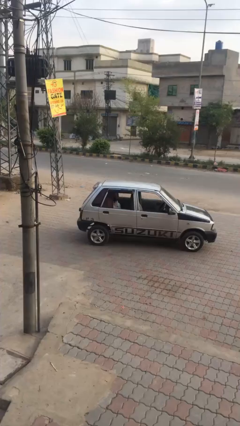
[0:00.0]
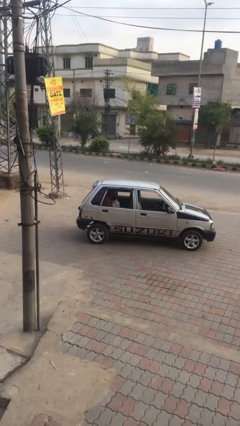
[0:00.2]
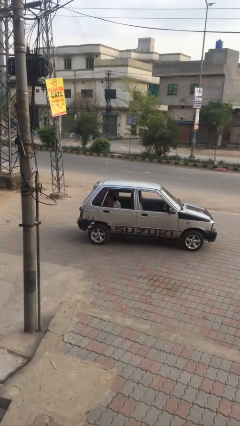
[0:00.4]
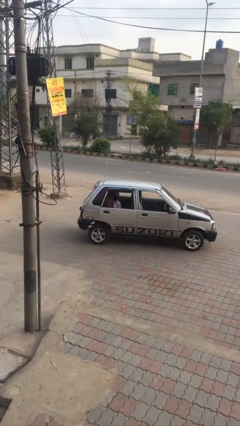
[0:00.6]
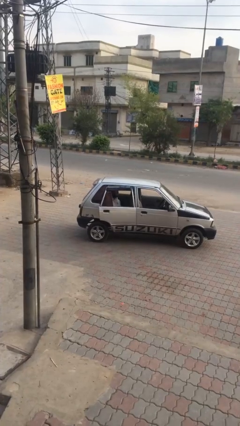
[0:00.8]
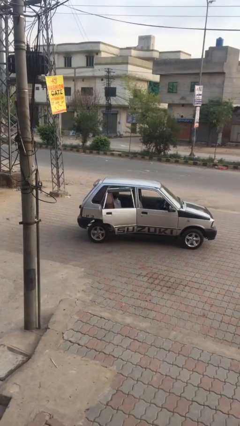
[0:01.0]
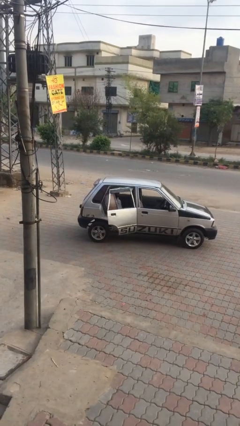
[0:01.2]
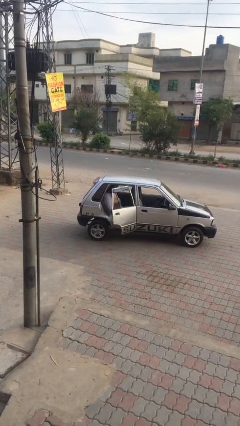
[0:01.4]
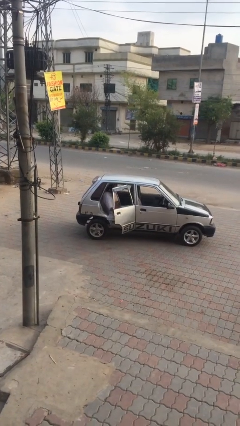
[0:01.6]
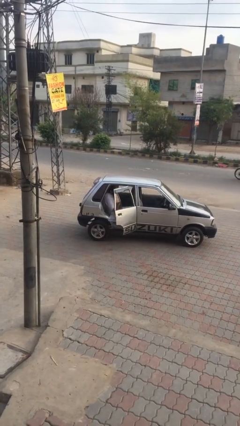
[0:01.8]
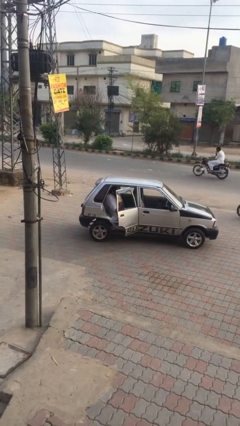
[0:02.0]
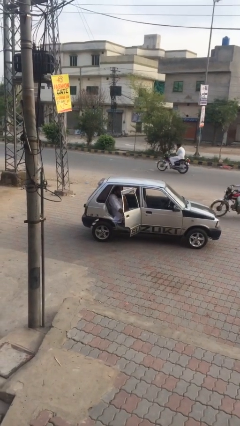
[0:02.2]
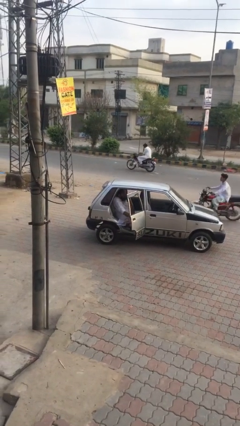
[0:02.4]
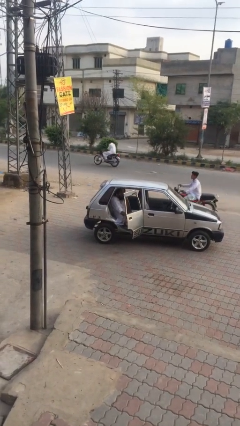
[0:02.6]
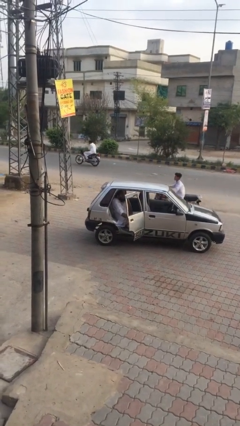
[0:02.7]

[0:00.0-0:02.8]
person opens car door

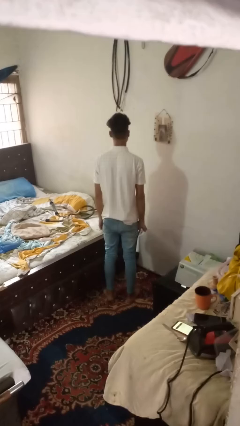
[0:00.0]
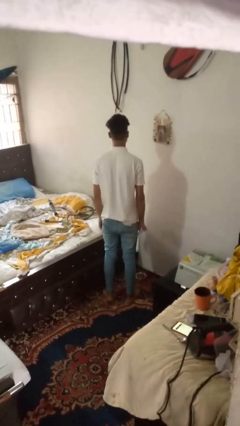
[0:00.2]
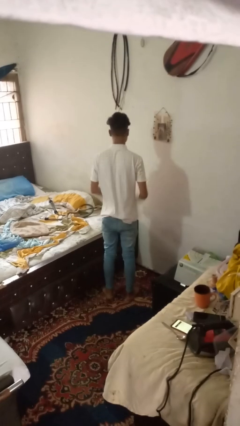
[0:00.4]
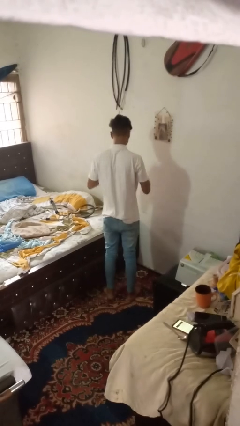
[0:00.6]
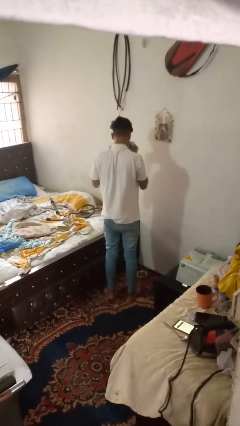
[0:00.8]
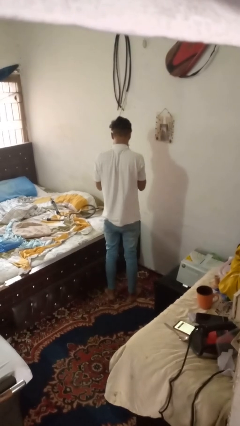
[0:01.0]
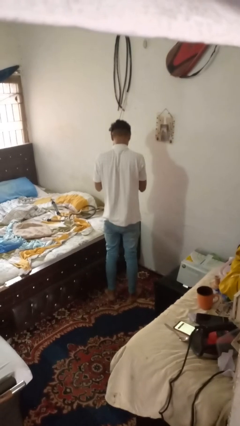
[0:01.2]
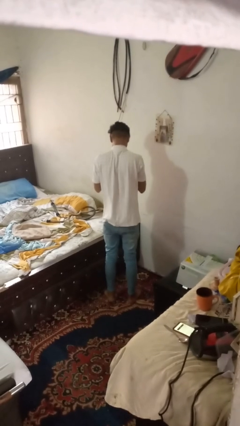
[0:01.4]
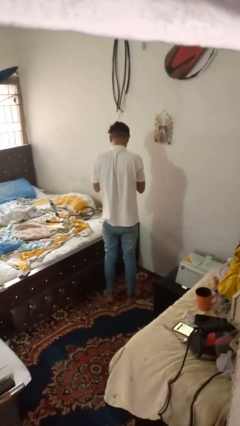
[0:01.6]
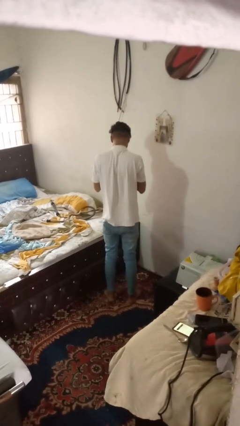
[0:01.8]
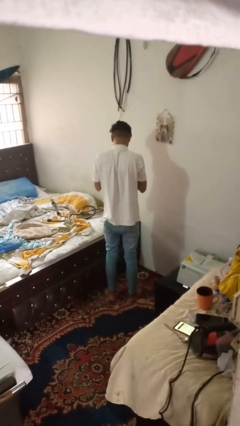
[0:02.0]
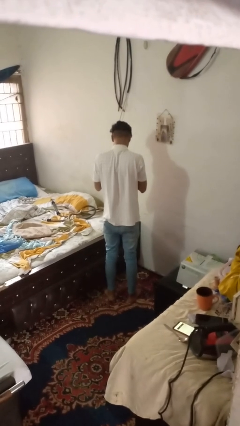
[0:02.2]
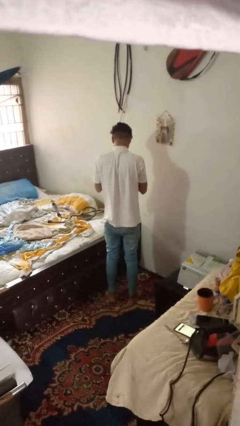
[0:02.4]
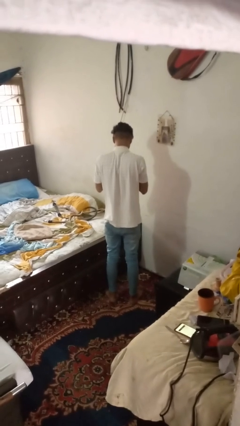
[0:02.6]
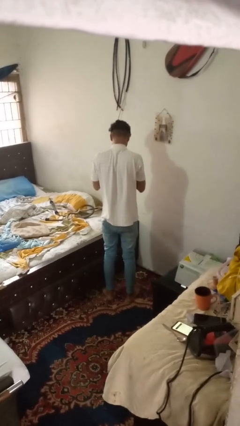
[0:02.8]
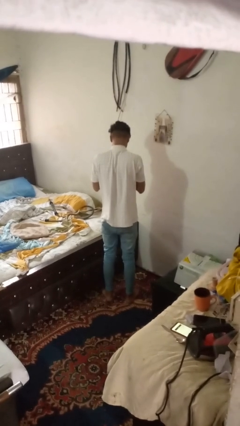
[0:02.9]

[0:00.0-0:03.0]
person blows nose

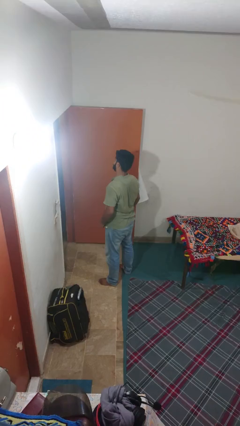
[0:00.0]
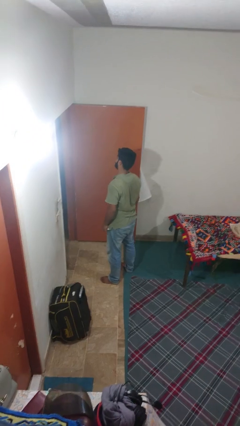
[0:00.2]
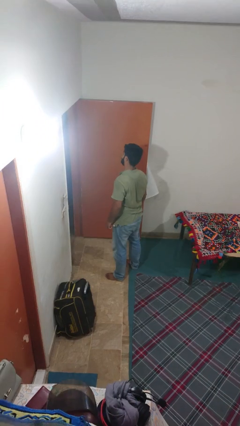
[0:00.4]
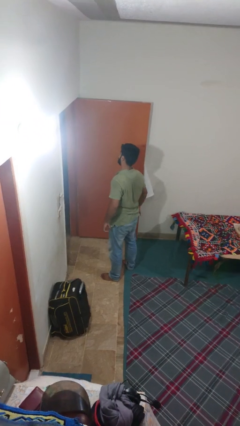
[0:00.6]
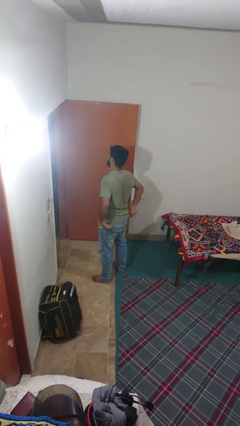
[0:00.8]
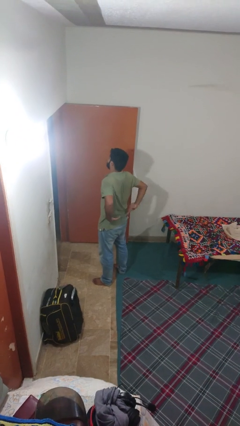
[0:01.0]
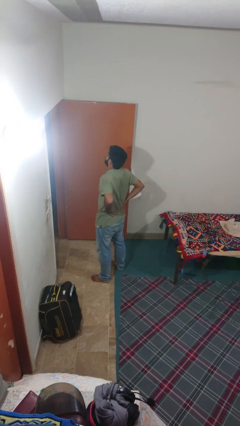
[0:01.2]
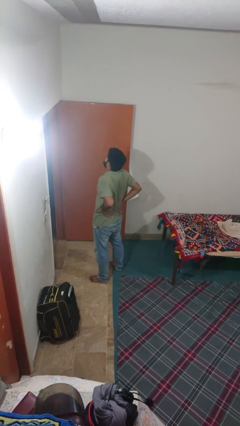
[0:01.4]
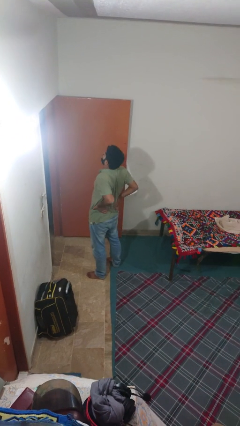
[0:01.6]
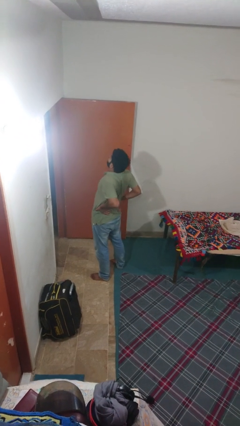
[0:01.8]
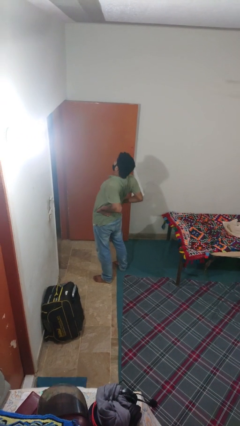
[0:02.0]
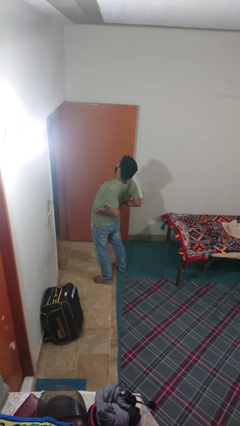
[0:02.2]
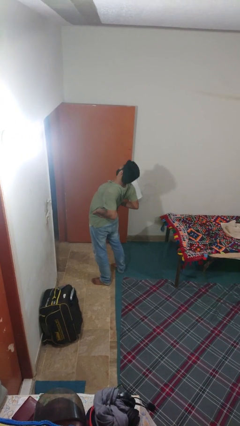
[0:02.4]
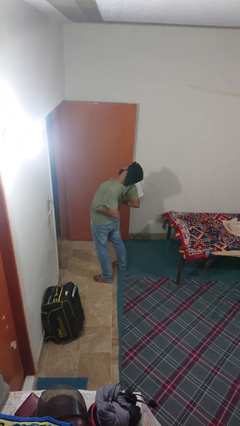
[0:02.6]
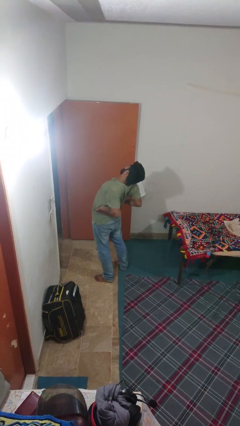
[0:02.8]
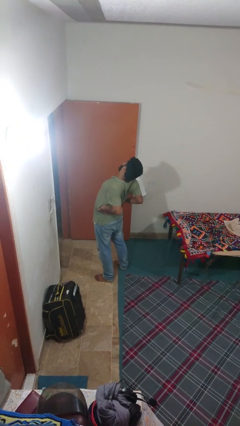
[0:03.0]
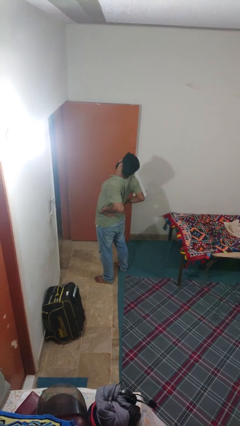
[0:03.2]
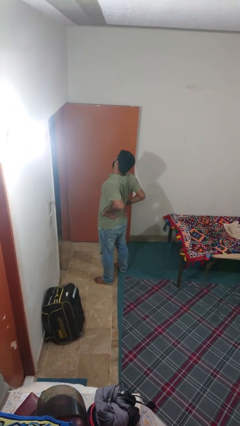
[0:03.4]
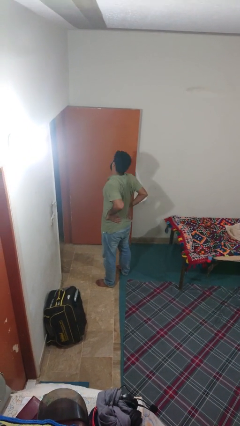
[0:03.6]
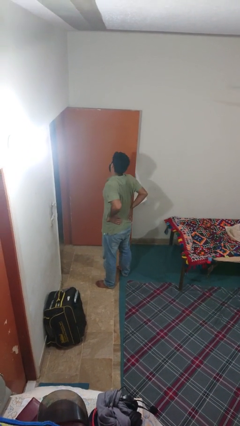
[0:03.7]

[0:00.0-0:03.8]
person stretches back

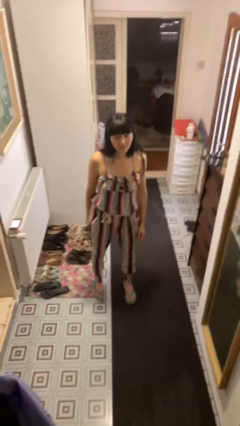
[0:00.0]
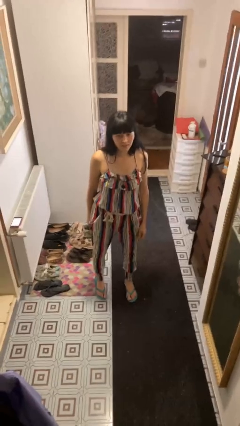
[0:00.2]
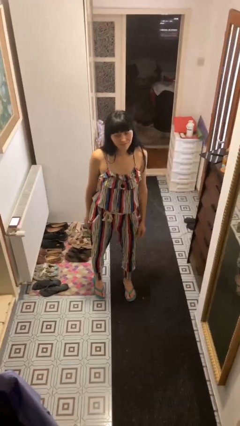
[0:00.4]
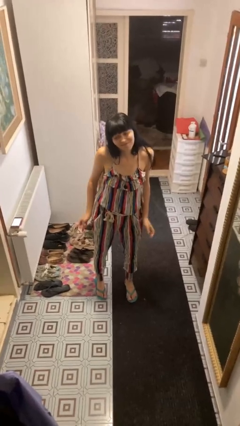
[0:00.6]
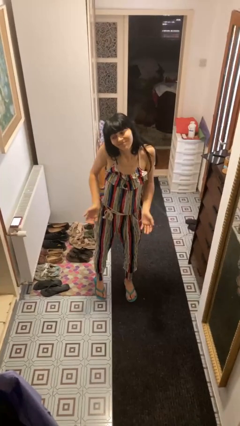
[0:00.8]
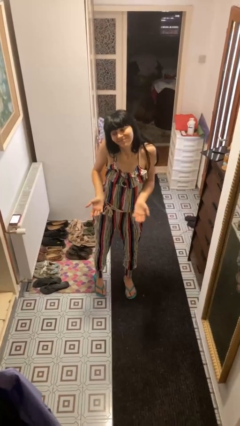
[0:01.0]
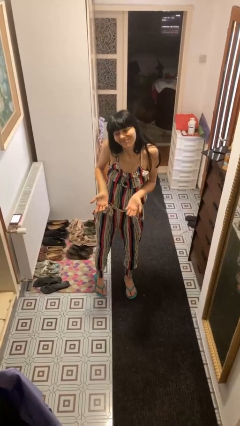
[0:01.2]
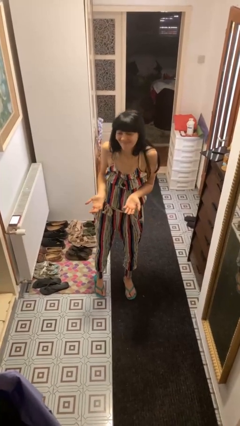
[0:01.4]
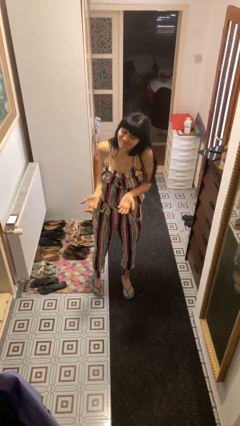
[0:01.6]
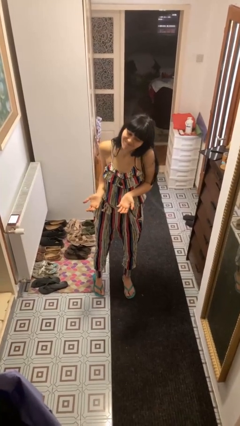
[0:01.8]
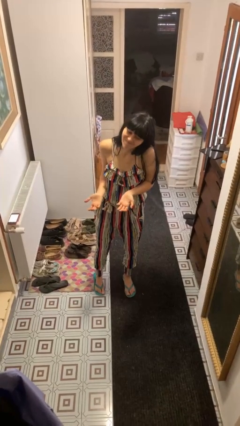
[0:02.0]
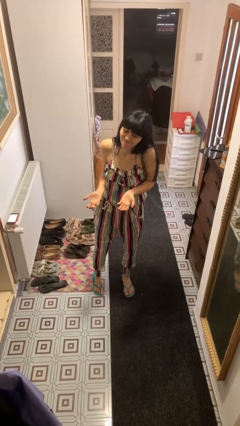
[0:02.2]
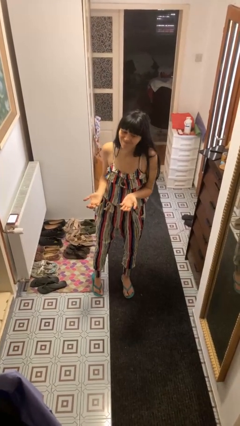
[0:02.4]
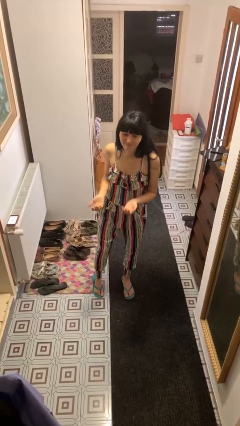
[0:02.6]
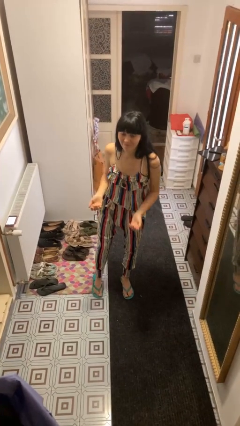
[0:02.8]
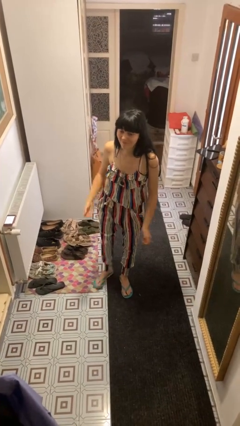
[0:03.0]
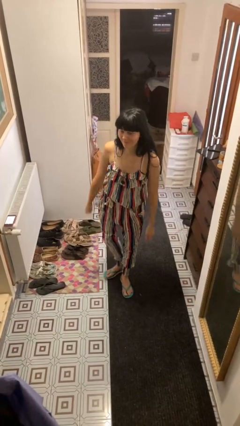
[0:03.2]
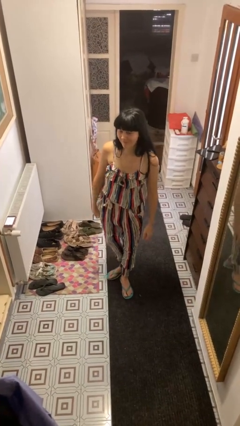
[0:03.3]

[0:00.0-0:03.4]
person shrugs

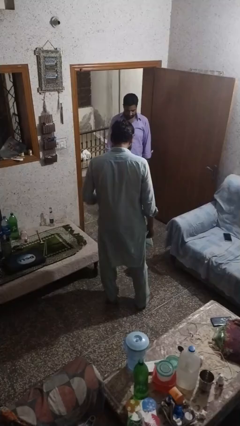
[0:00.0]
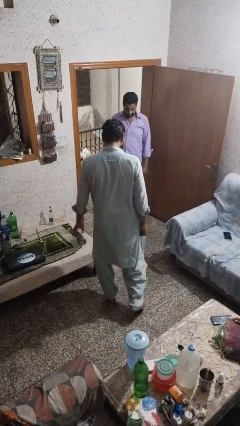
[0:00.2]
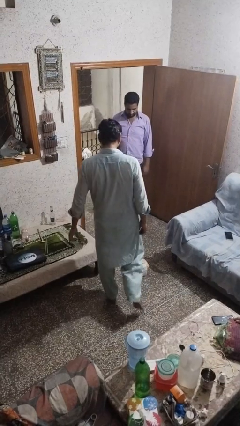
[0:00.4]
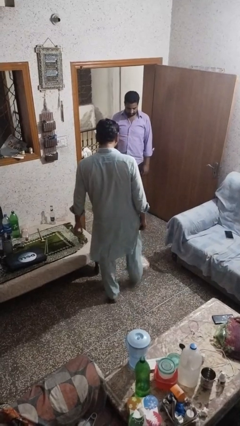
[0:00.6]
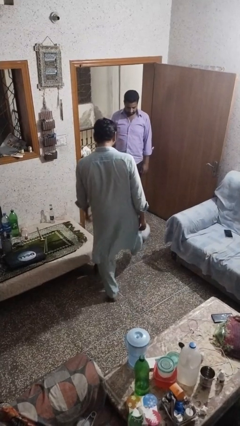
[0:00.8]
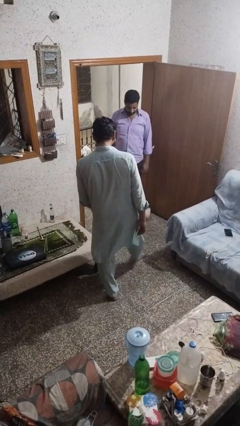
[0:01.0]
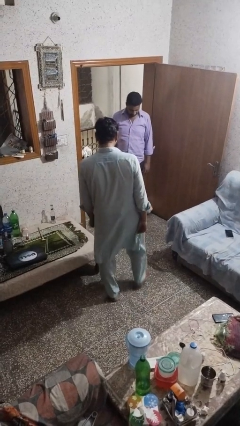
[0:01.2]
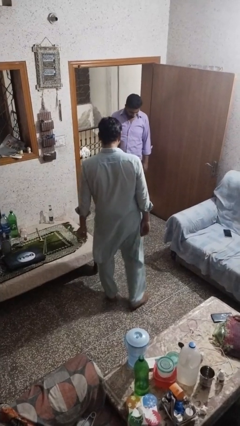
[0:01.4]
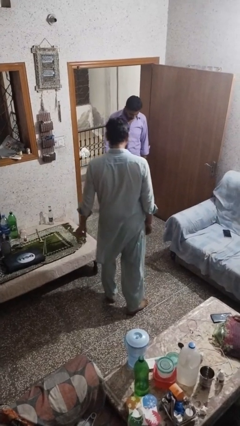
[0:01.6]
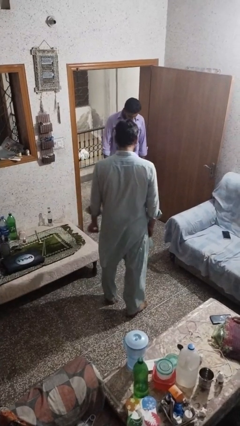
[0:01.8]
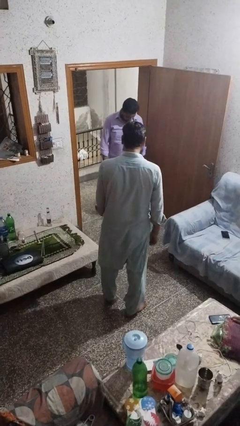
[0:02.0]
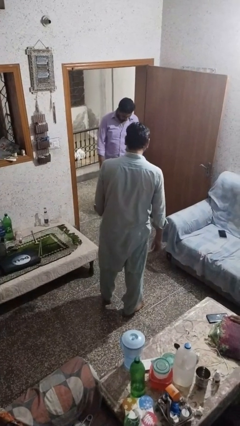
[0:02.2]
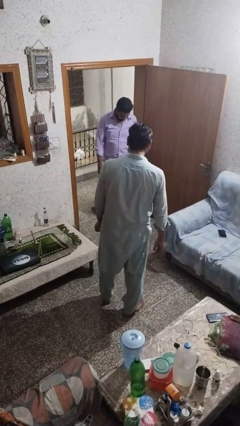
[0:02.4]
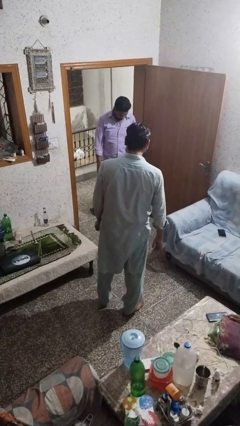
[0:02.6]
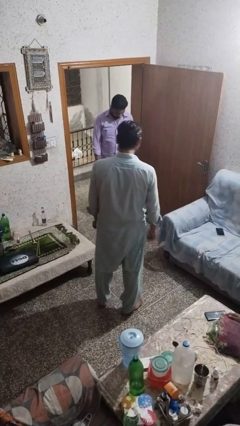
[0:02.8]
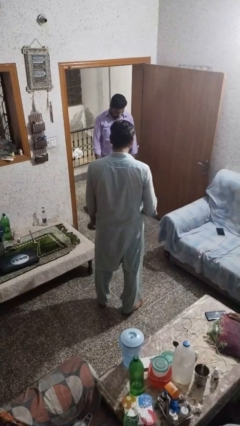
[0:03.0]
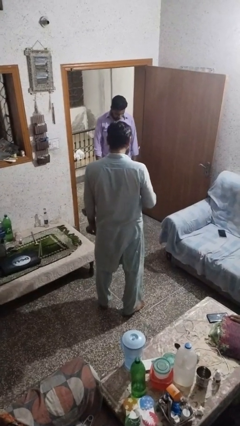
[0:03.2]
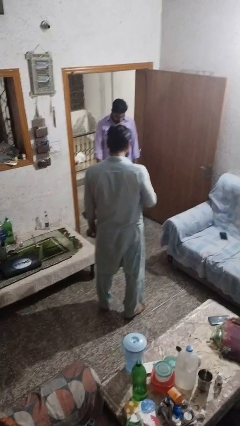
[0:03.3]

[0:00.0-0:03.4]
person kicks object to person

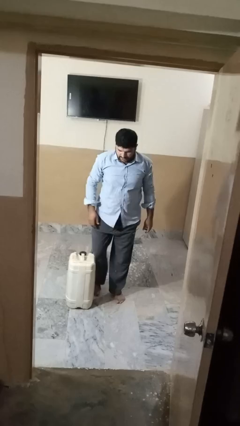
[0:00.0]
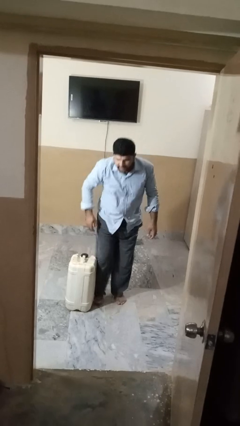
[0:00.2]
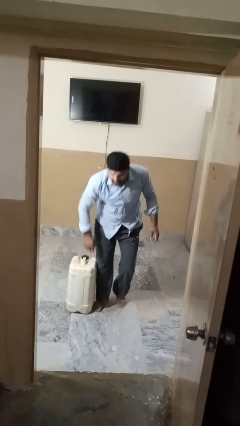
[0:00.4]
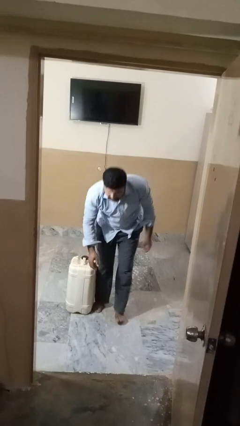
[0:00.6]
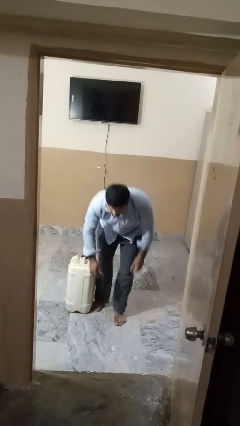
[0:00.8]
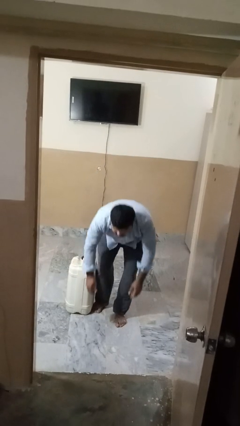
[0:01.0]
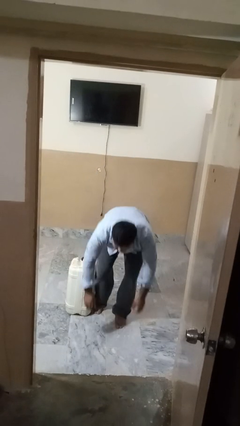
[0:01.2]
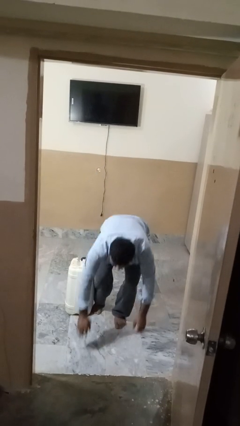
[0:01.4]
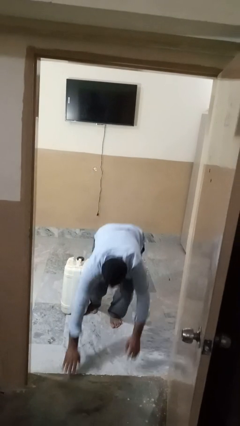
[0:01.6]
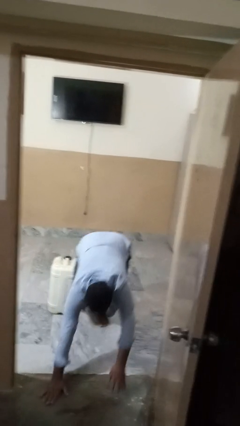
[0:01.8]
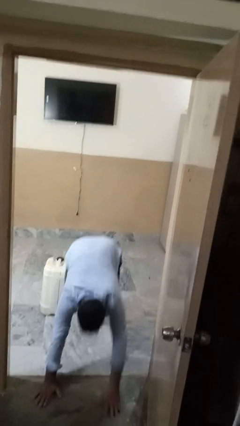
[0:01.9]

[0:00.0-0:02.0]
person trips on object on floor
